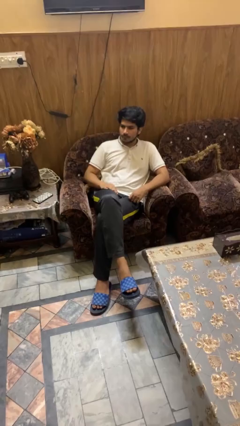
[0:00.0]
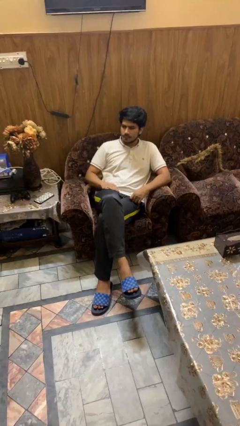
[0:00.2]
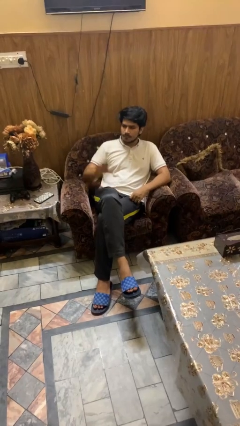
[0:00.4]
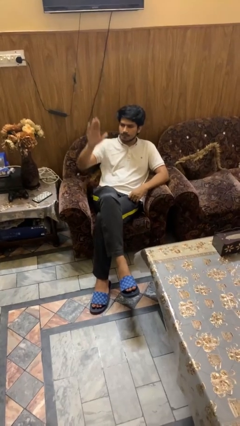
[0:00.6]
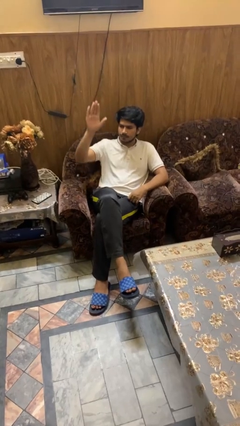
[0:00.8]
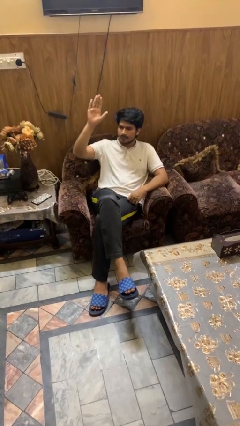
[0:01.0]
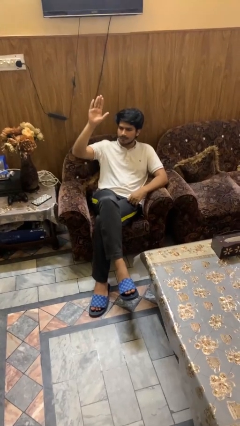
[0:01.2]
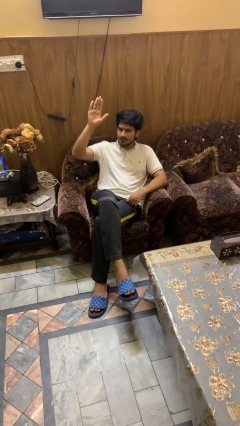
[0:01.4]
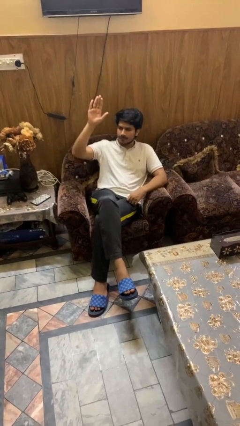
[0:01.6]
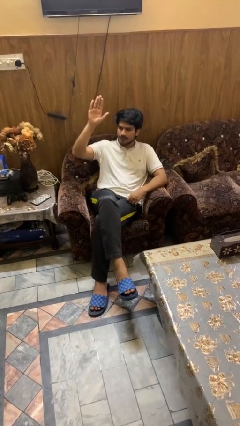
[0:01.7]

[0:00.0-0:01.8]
person gestures raise hand

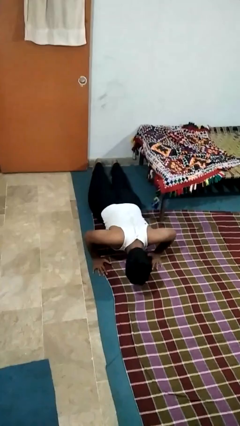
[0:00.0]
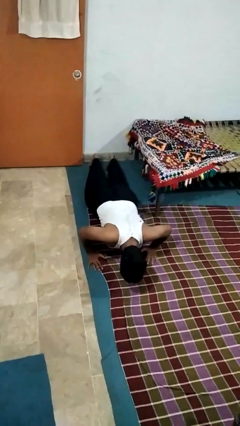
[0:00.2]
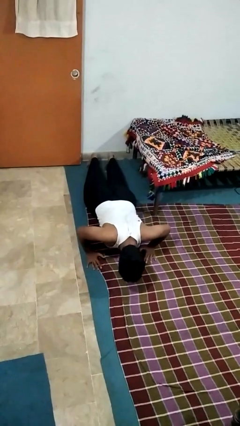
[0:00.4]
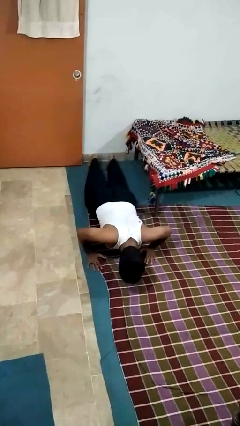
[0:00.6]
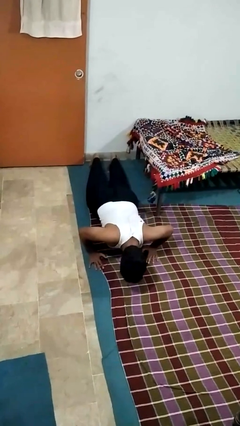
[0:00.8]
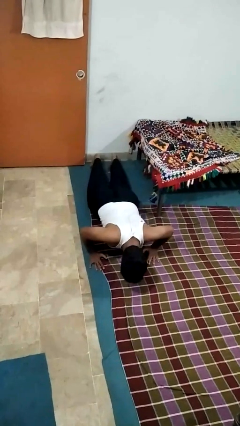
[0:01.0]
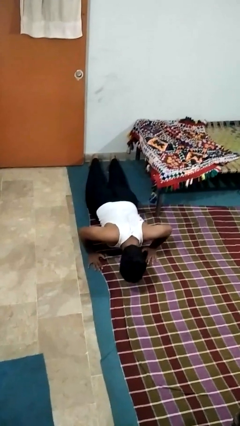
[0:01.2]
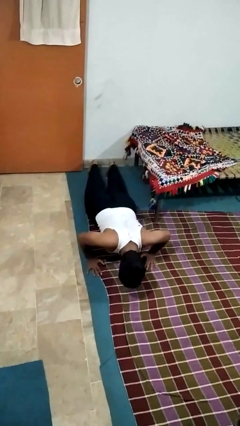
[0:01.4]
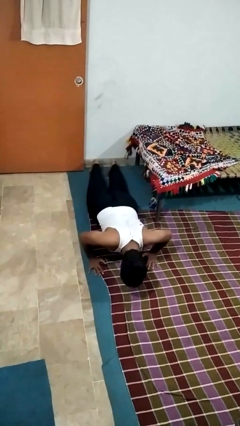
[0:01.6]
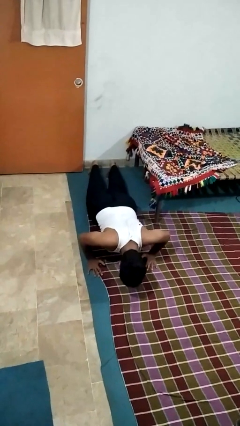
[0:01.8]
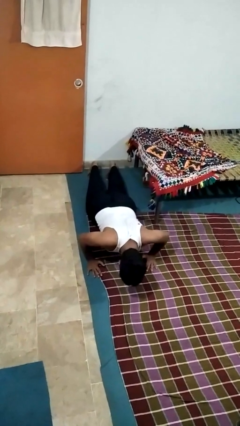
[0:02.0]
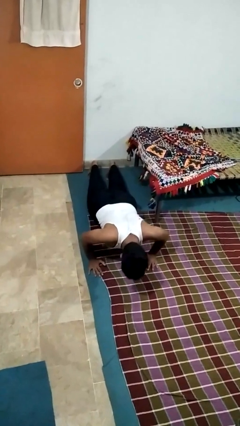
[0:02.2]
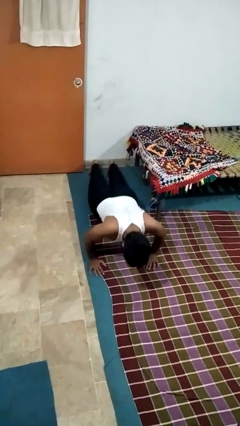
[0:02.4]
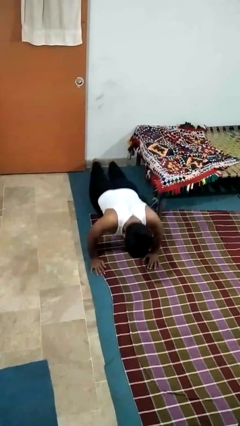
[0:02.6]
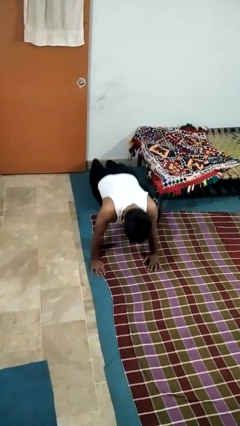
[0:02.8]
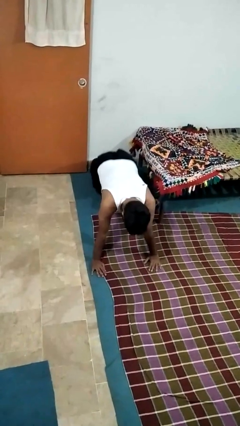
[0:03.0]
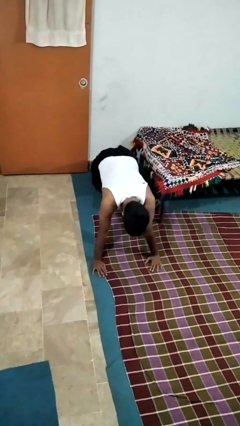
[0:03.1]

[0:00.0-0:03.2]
person exercises with pushup

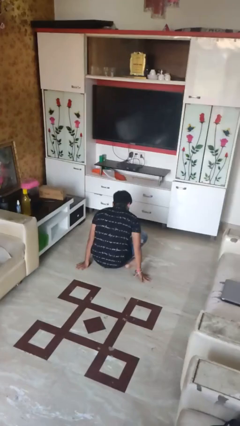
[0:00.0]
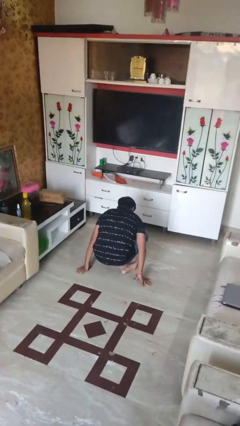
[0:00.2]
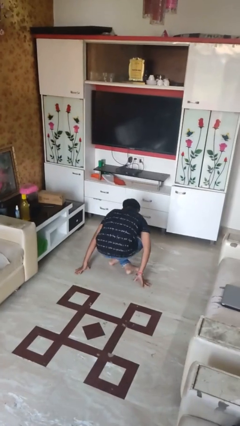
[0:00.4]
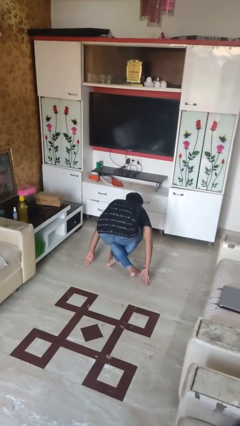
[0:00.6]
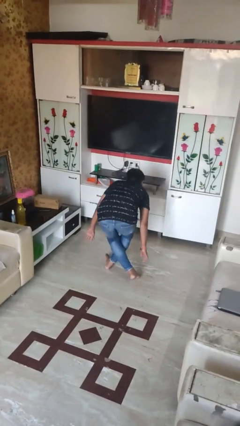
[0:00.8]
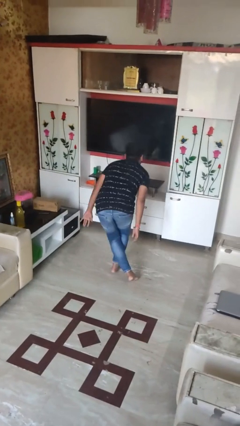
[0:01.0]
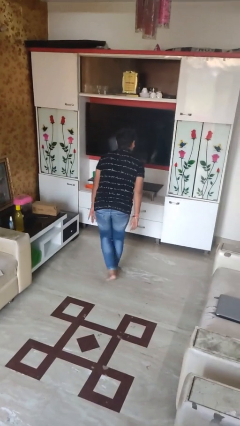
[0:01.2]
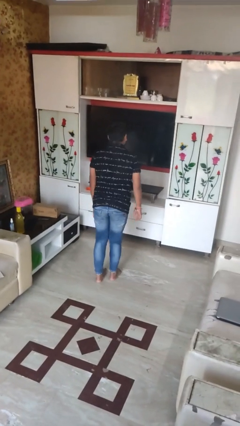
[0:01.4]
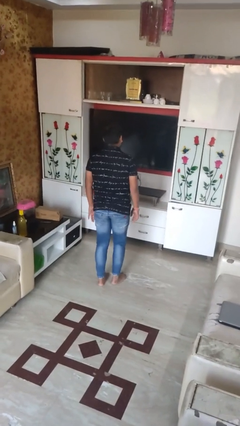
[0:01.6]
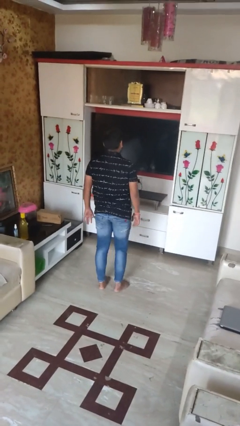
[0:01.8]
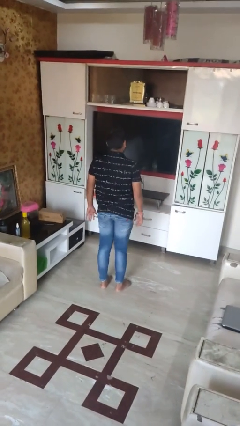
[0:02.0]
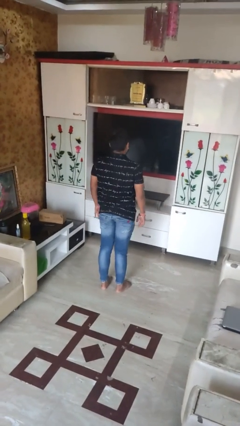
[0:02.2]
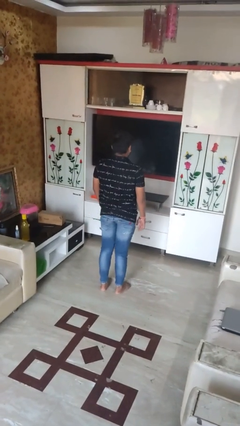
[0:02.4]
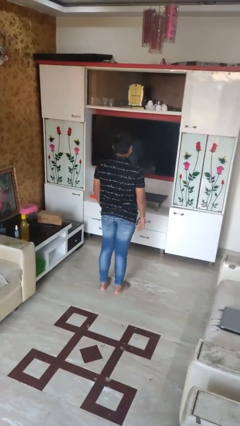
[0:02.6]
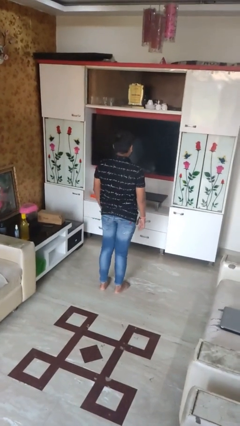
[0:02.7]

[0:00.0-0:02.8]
person stands up from floor

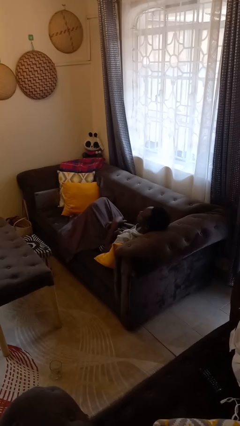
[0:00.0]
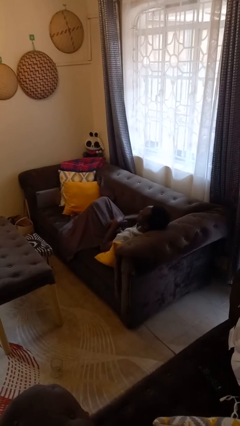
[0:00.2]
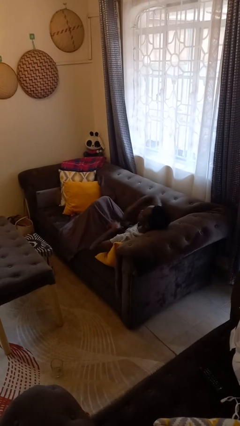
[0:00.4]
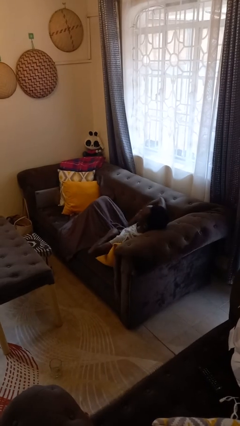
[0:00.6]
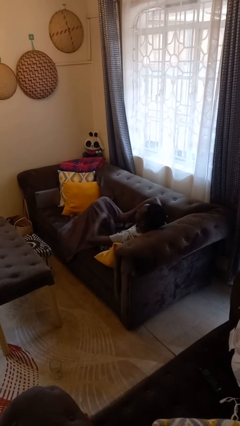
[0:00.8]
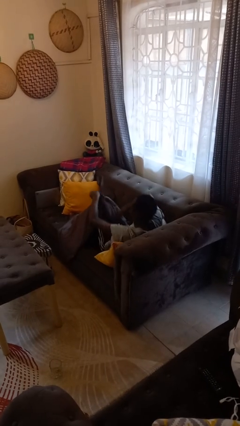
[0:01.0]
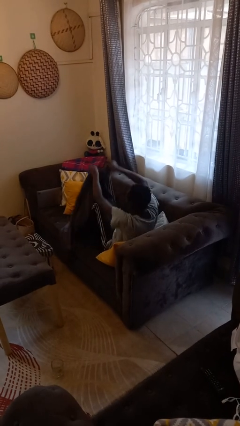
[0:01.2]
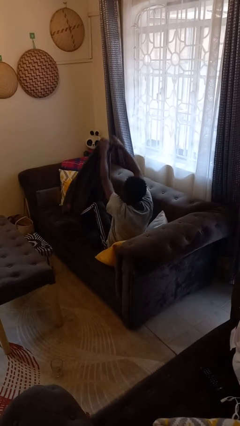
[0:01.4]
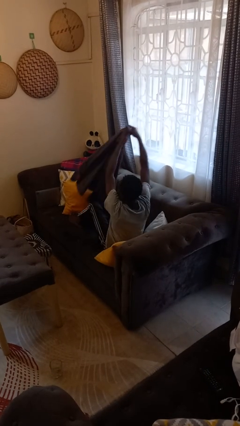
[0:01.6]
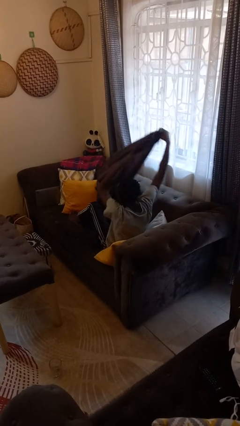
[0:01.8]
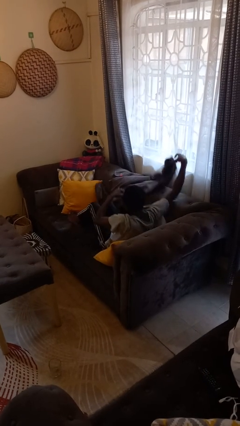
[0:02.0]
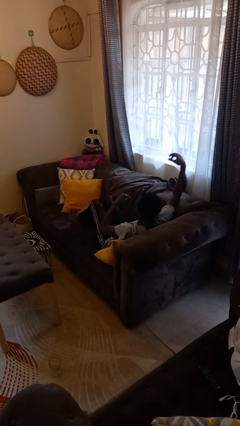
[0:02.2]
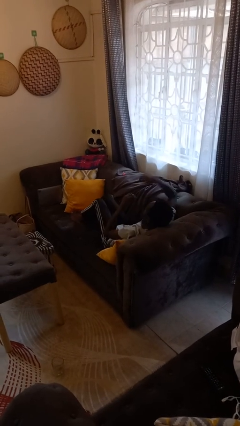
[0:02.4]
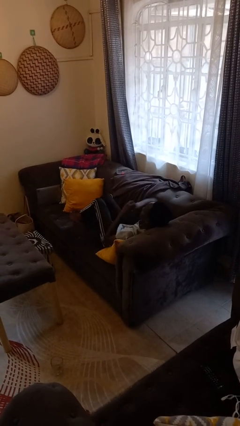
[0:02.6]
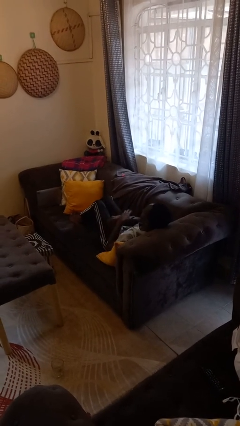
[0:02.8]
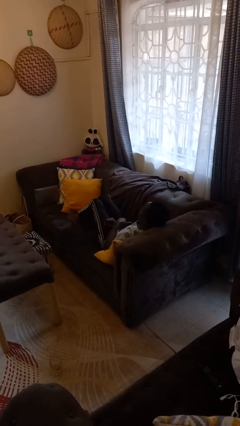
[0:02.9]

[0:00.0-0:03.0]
person uncovers with blanket

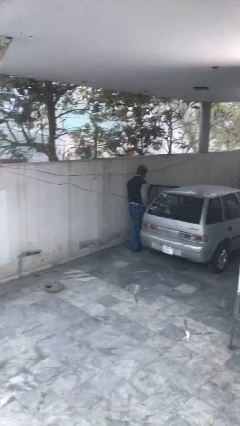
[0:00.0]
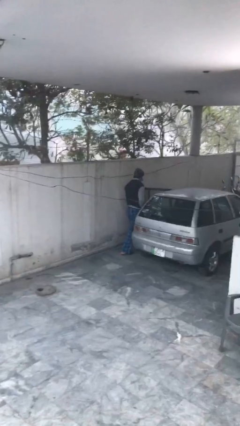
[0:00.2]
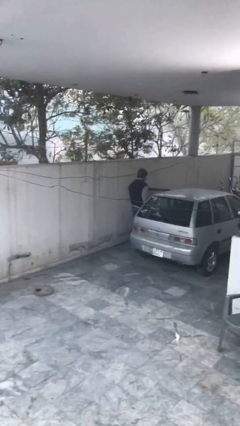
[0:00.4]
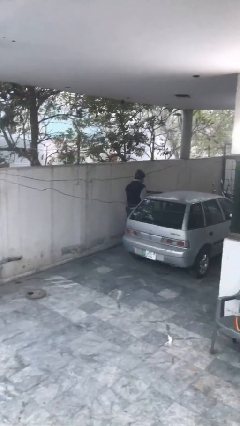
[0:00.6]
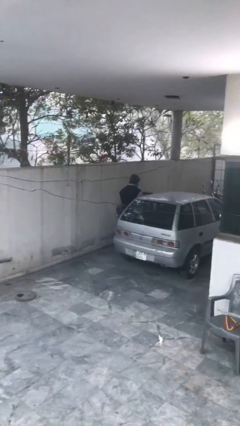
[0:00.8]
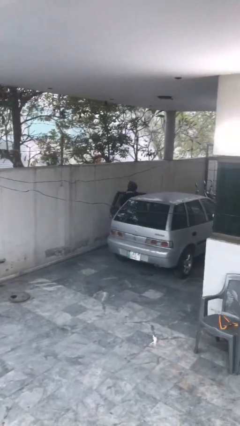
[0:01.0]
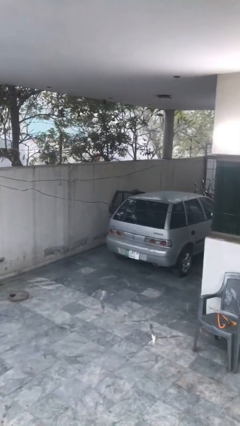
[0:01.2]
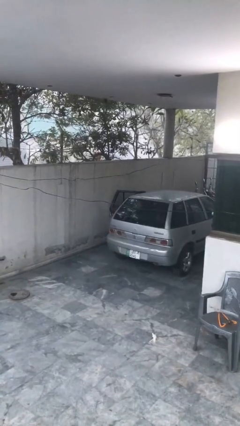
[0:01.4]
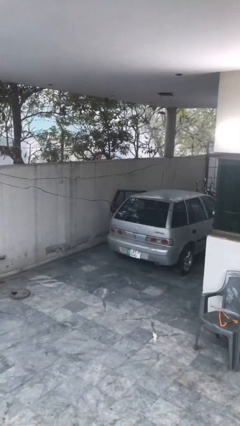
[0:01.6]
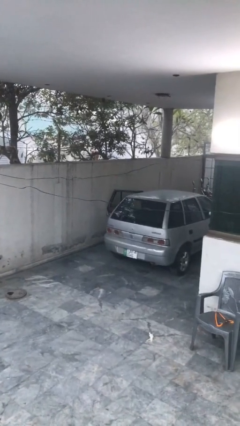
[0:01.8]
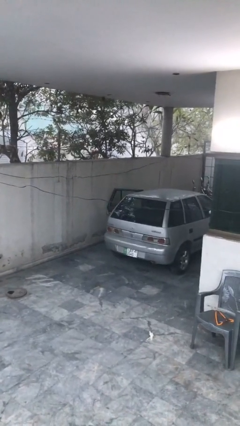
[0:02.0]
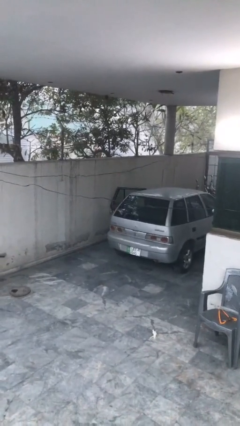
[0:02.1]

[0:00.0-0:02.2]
person enters car

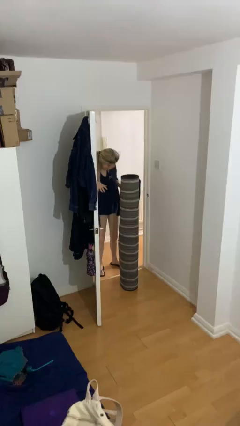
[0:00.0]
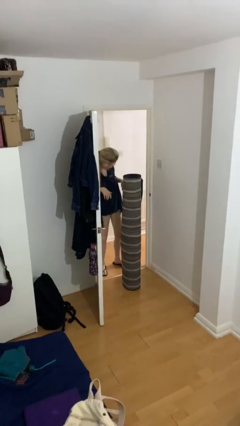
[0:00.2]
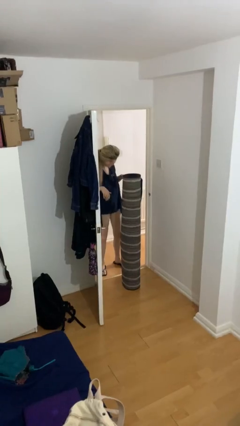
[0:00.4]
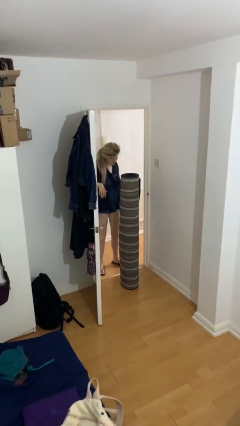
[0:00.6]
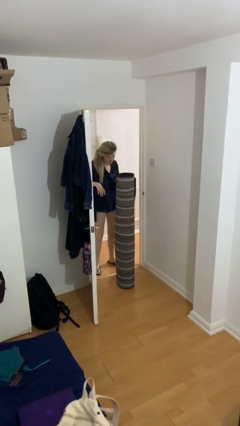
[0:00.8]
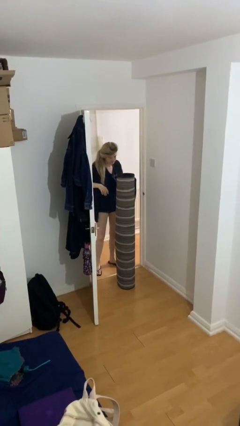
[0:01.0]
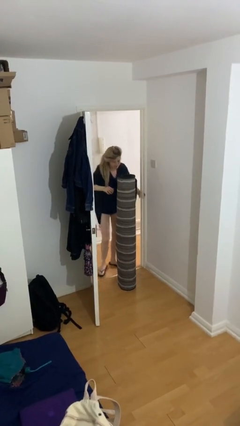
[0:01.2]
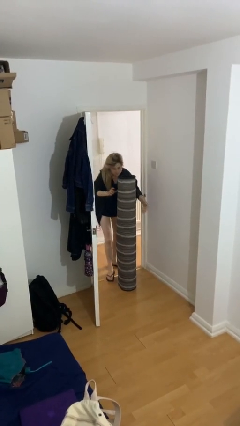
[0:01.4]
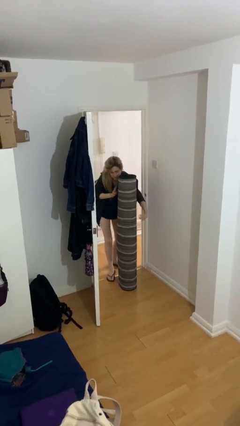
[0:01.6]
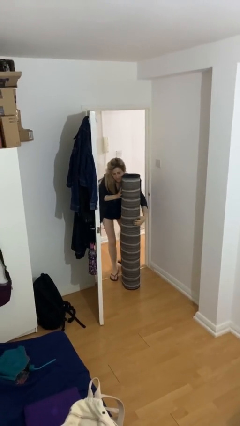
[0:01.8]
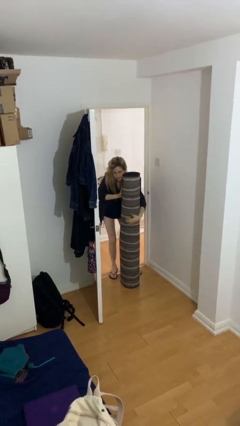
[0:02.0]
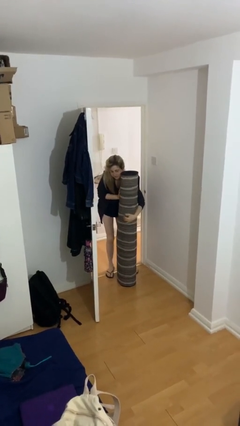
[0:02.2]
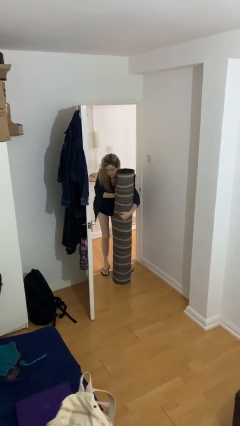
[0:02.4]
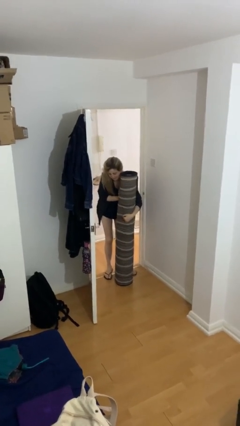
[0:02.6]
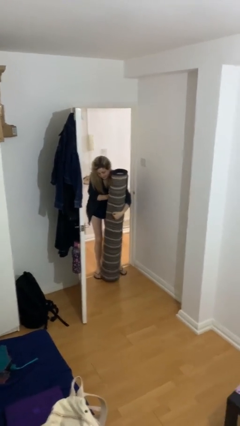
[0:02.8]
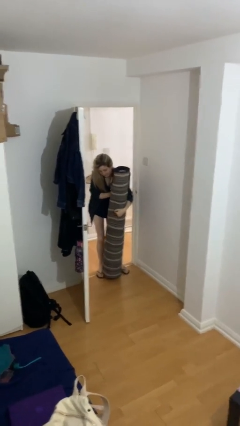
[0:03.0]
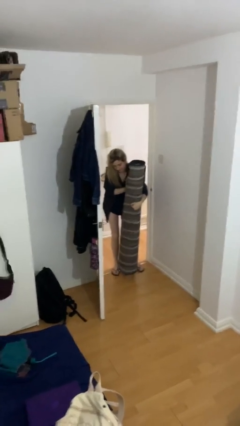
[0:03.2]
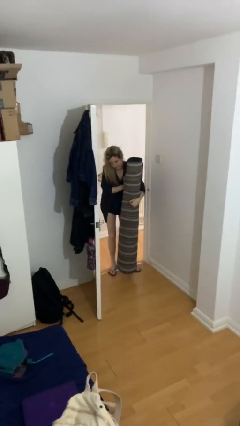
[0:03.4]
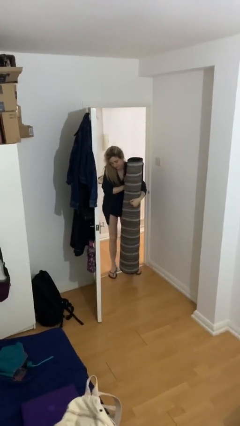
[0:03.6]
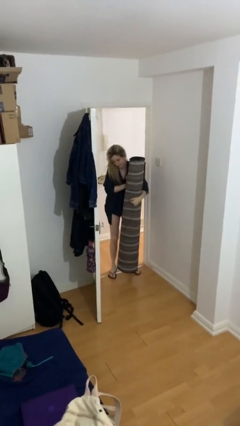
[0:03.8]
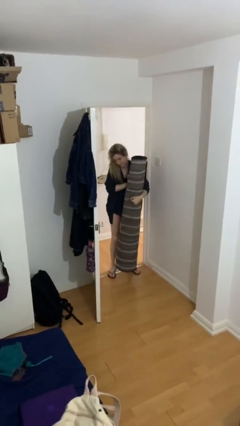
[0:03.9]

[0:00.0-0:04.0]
person picks up object from floor

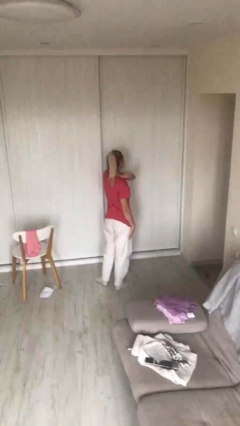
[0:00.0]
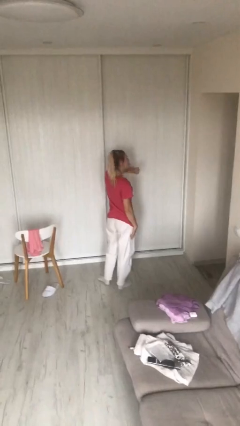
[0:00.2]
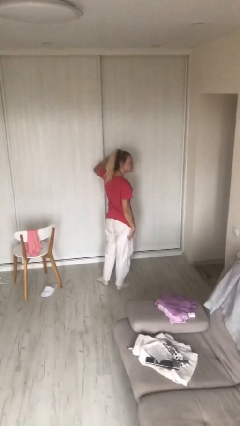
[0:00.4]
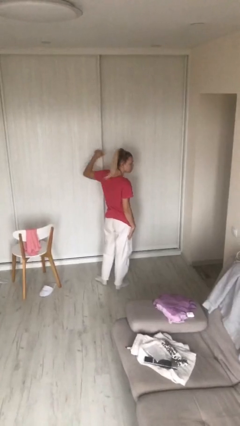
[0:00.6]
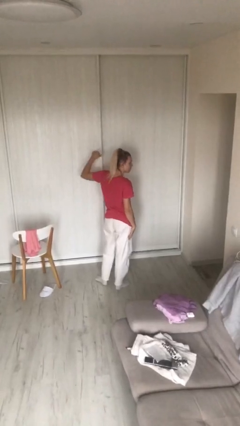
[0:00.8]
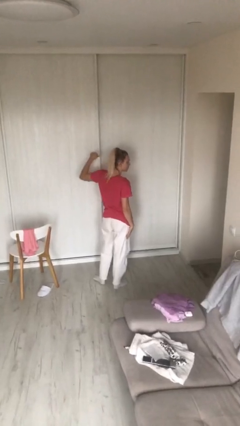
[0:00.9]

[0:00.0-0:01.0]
person gestures cut
